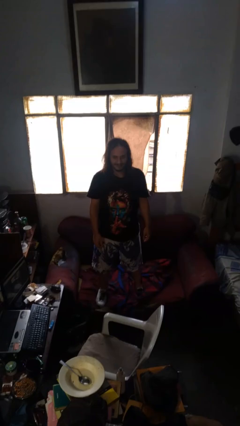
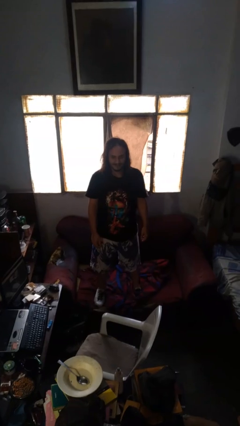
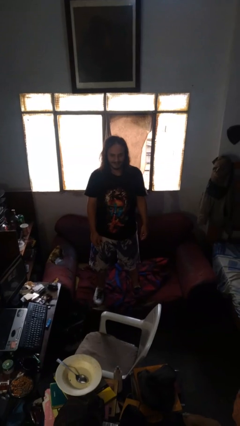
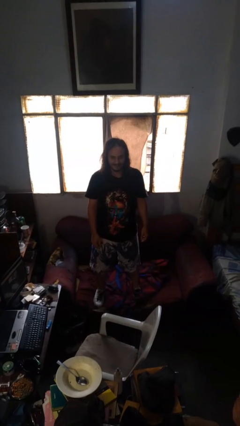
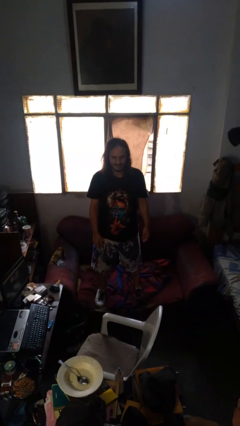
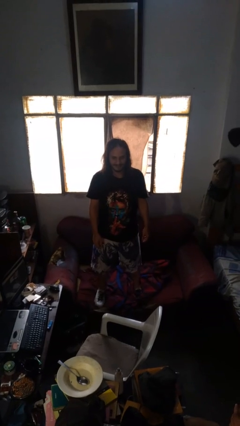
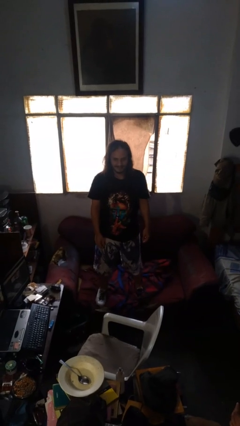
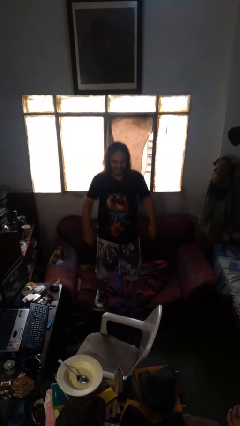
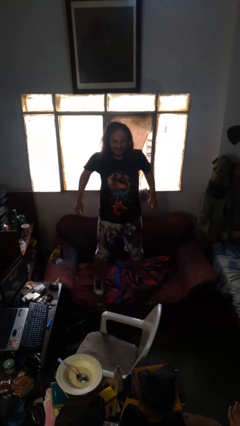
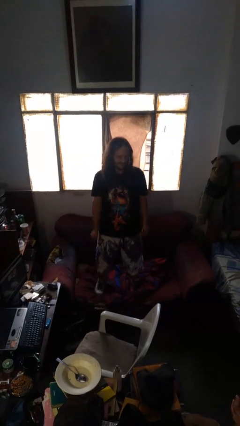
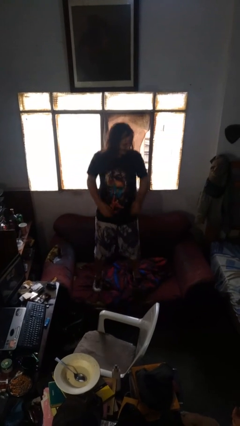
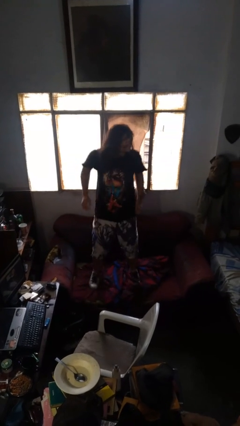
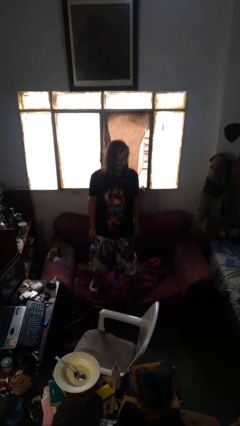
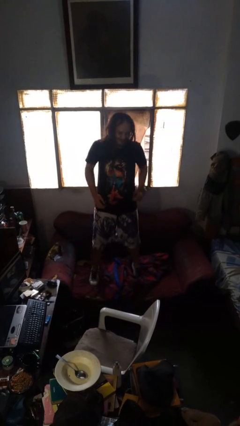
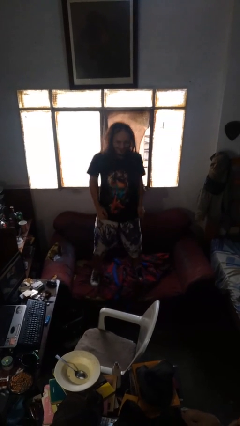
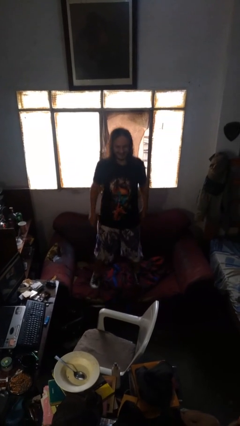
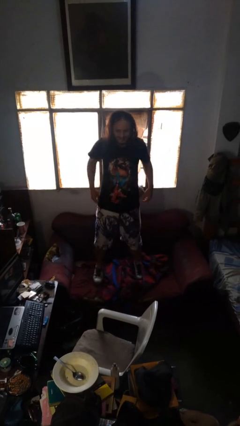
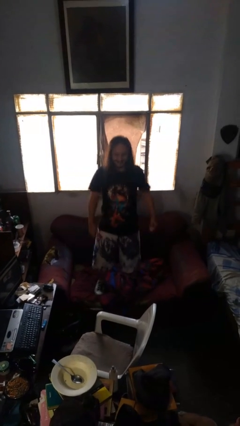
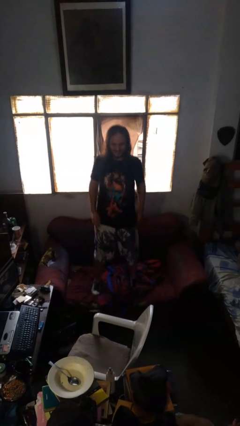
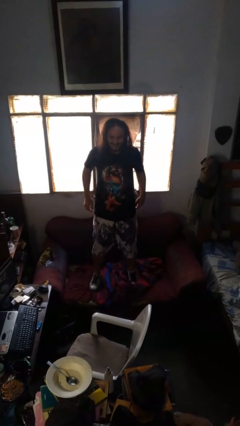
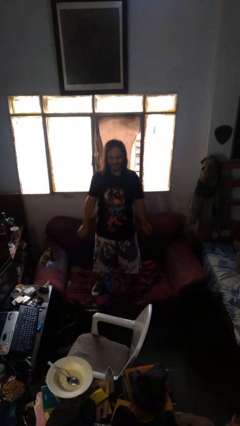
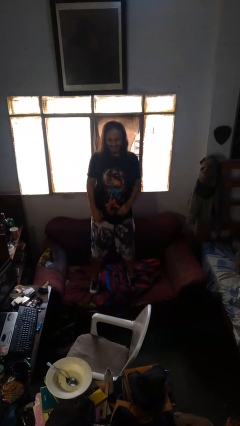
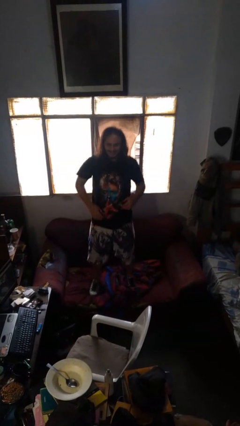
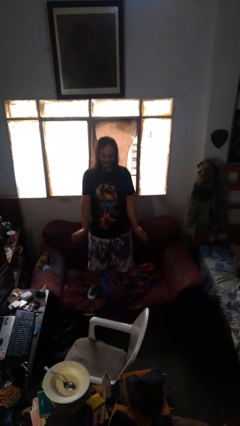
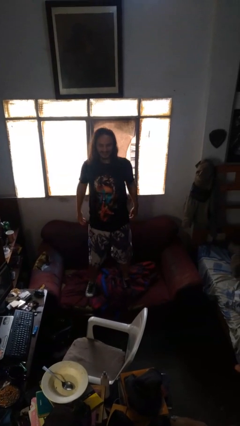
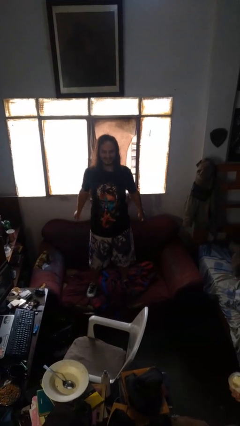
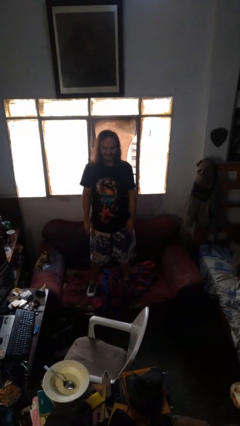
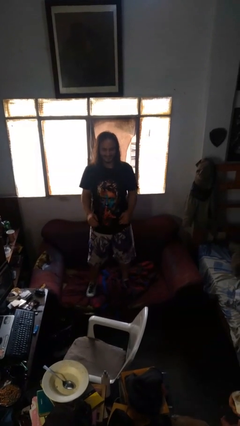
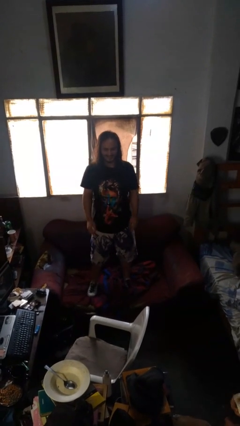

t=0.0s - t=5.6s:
person jumps on couch

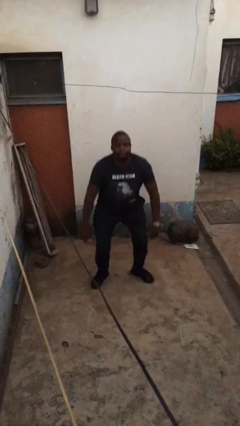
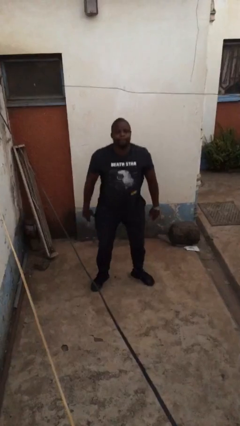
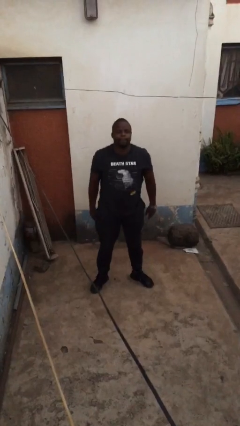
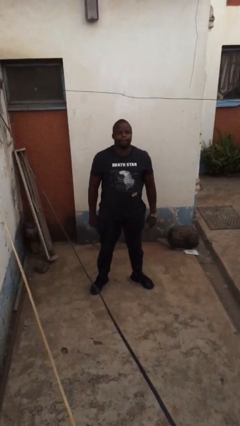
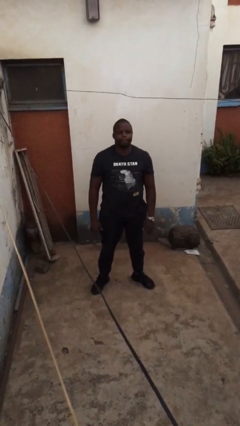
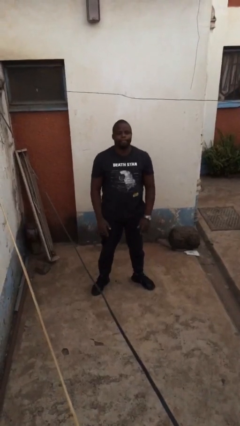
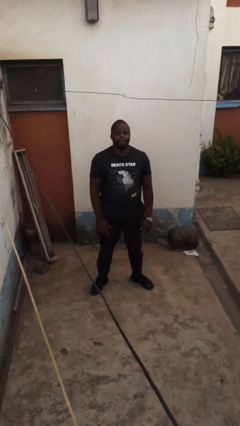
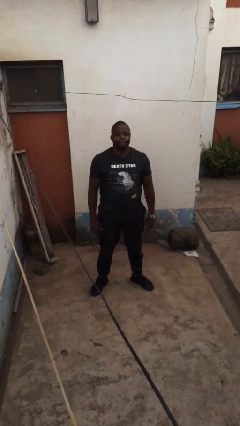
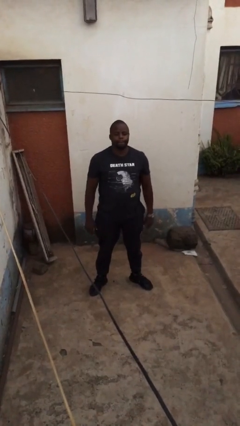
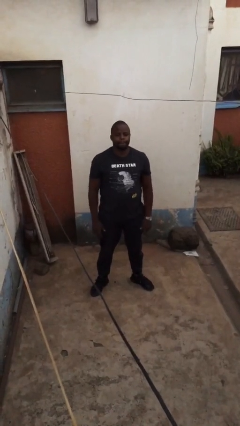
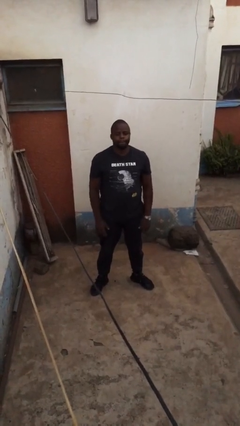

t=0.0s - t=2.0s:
person stands up

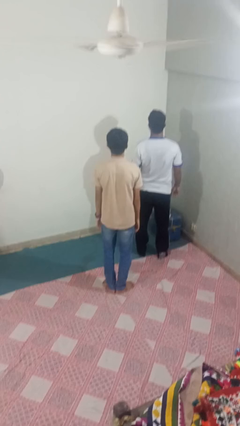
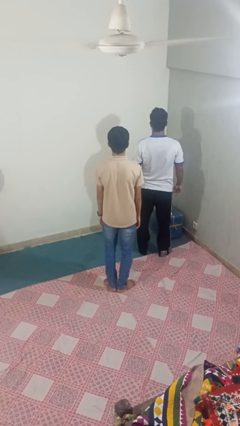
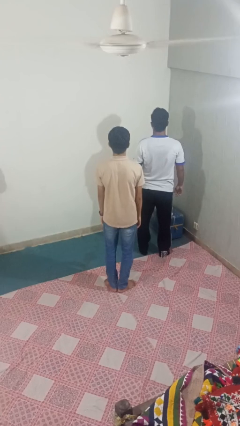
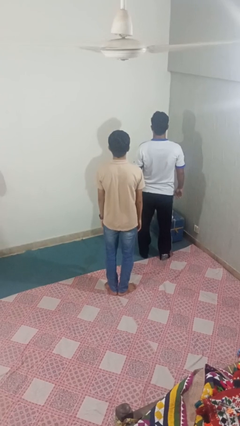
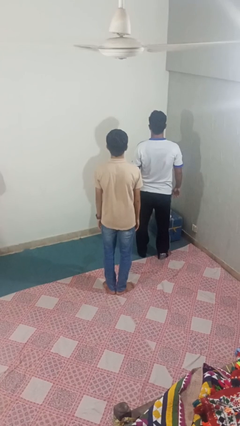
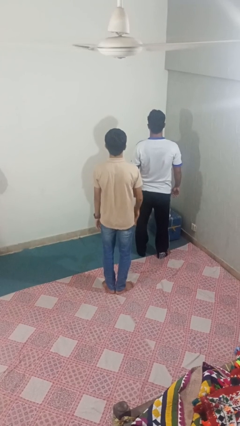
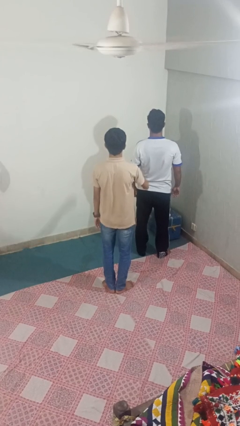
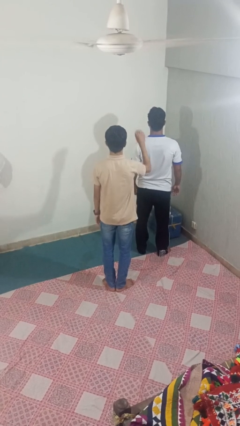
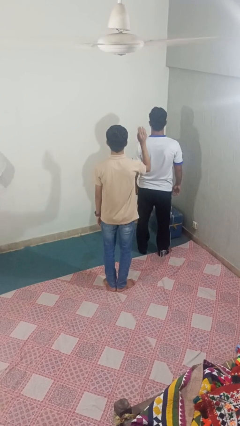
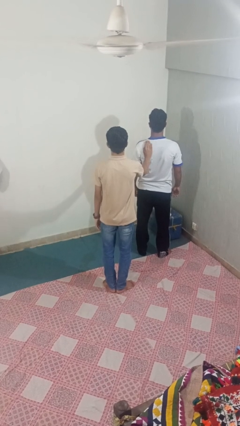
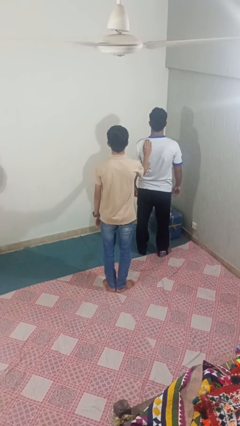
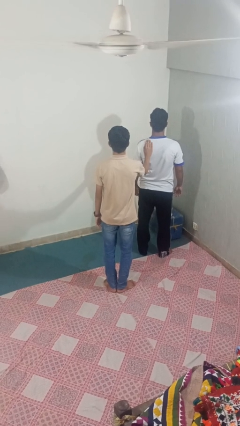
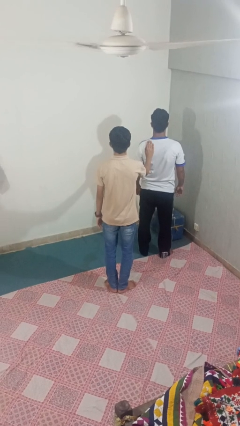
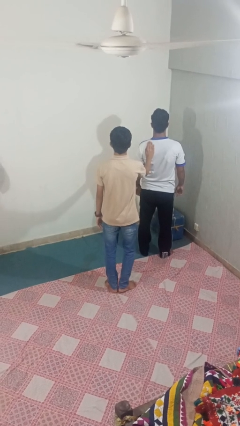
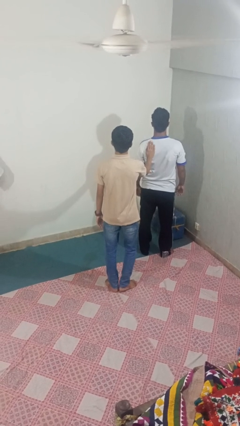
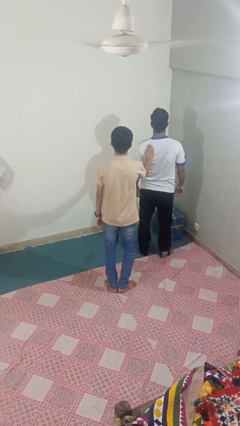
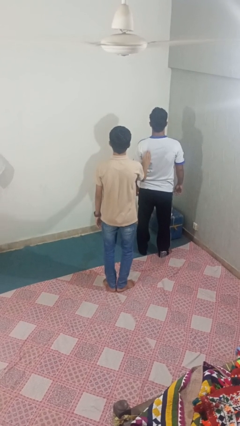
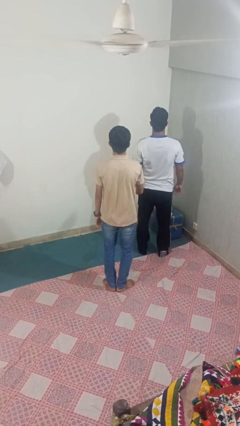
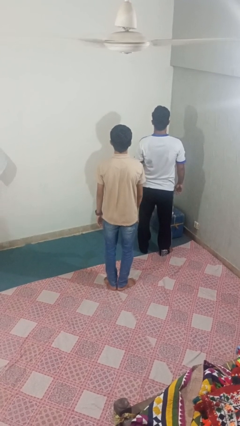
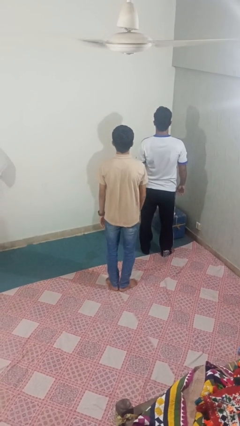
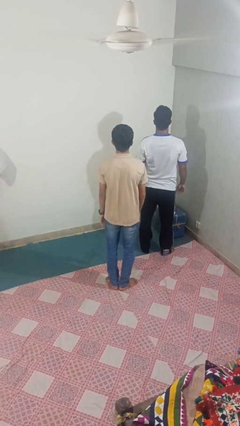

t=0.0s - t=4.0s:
person touches back of person

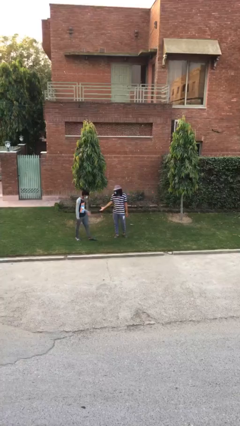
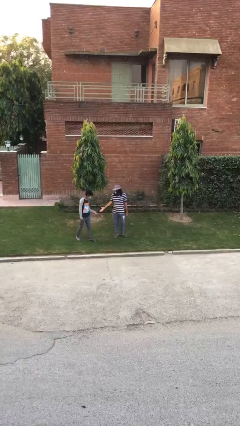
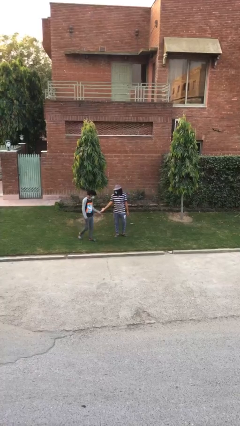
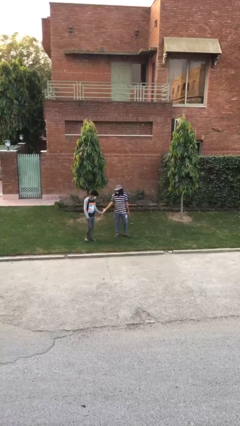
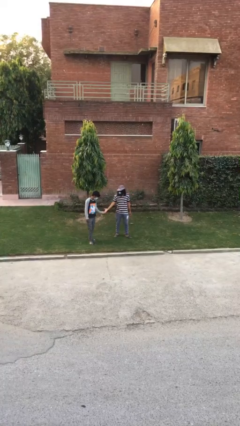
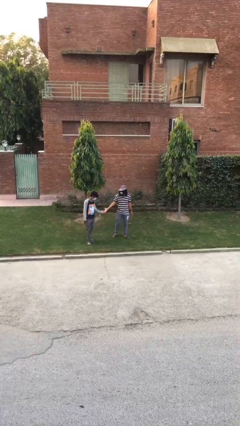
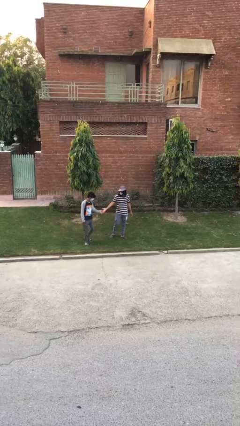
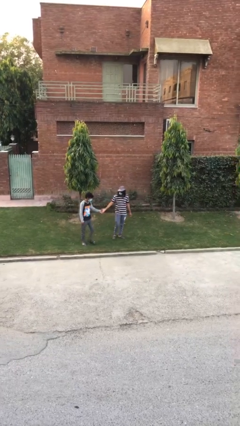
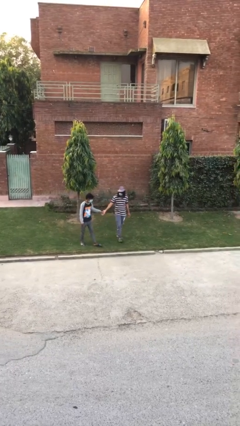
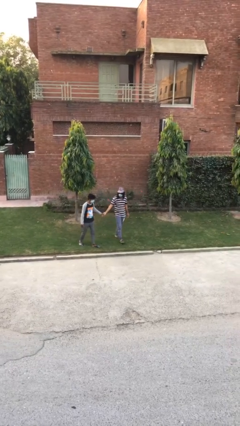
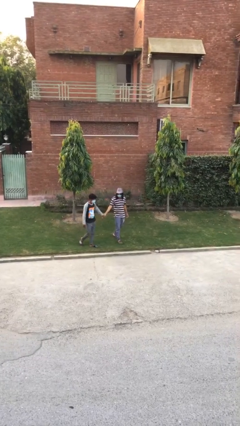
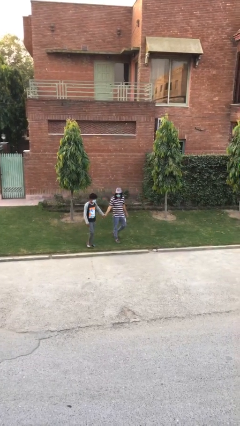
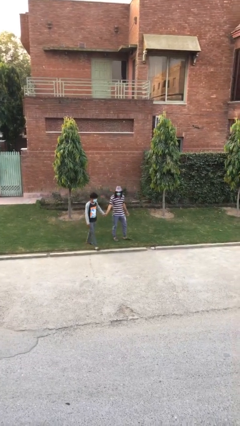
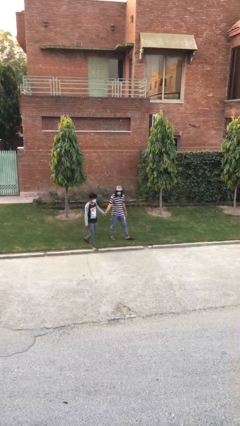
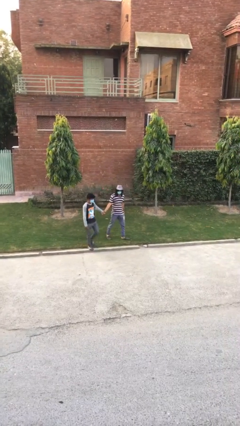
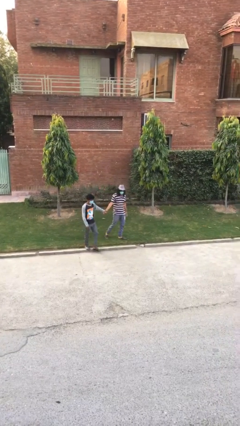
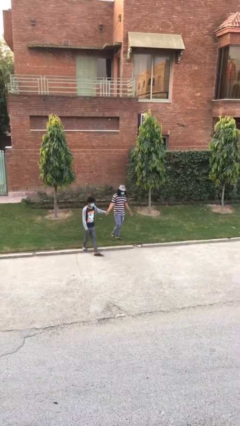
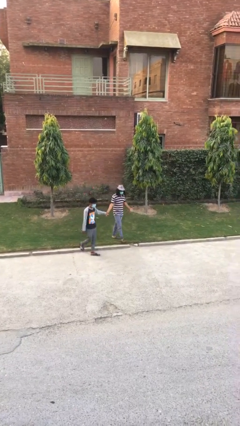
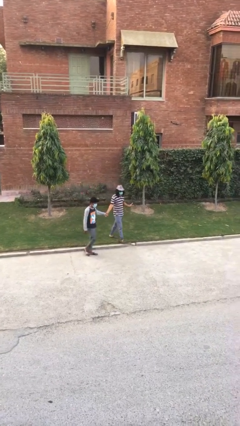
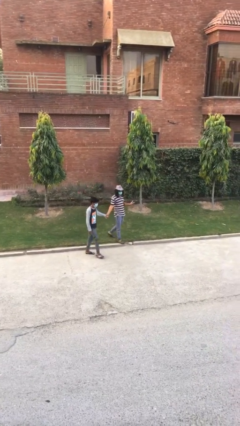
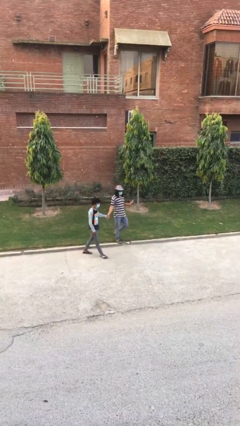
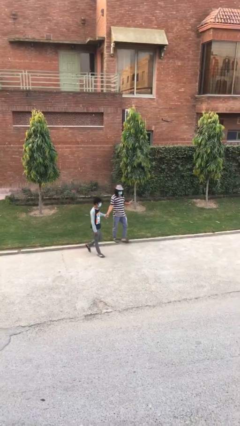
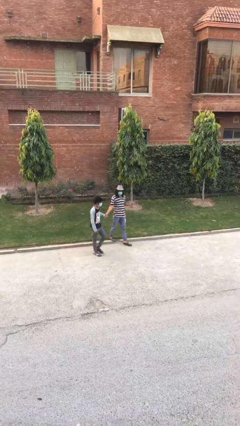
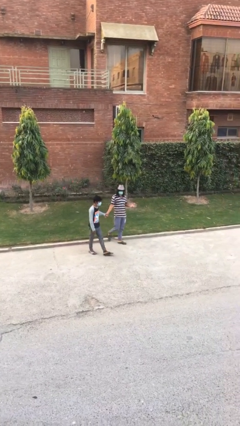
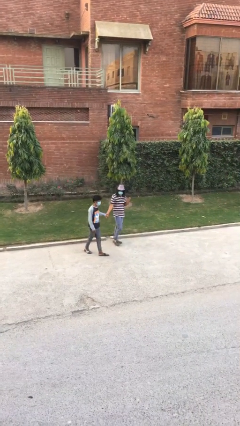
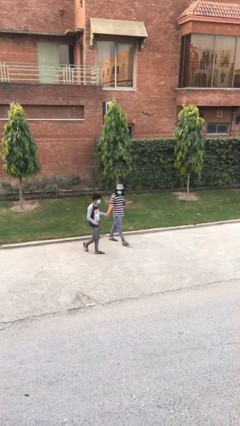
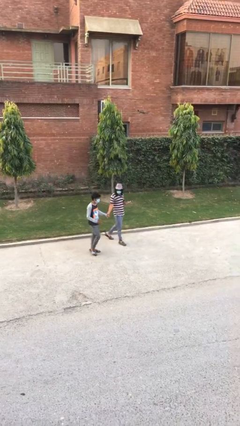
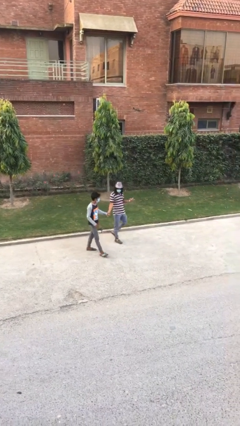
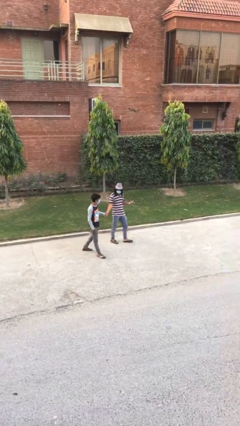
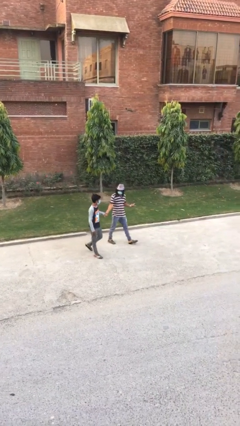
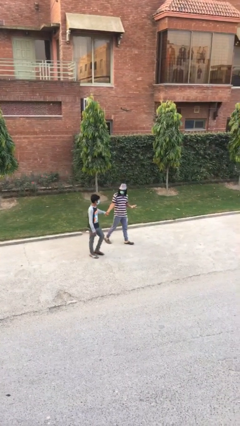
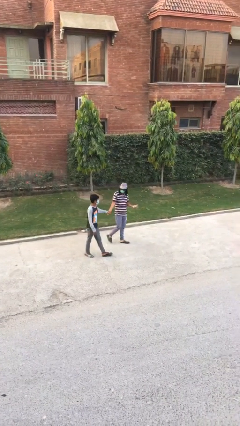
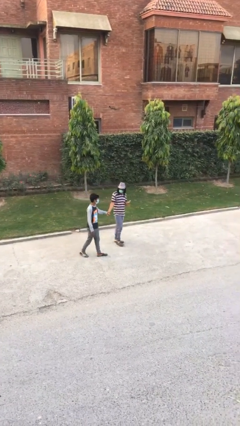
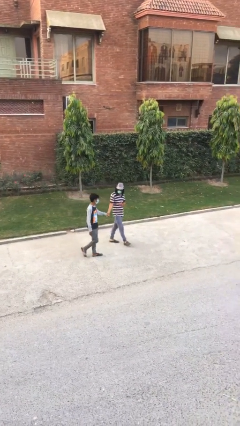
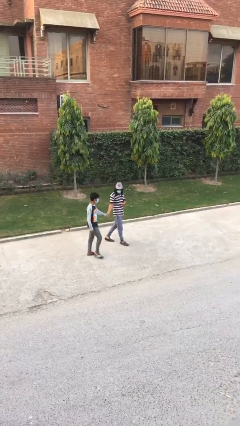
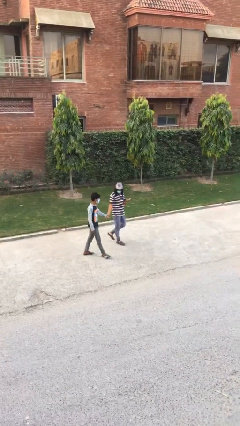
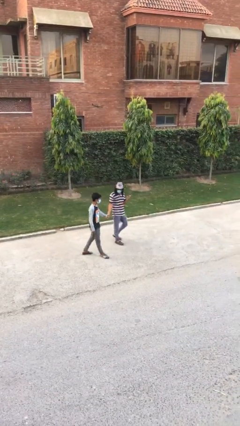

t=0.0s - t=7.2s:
person holds hand
